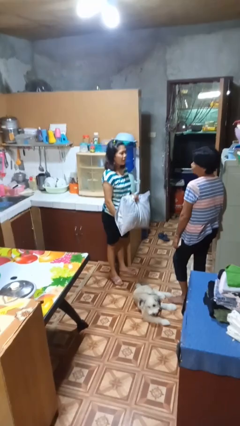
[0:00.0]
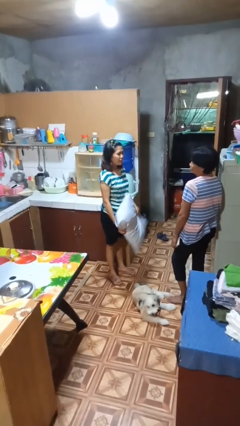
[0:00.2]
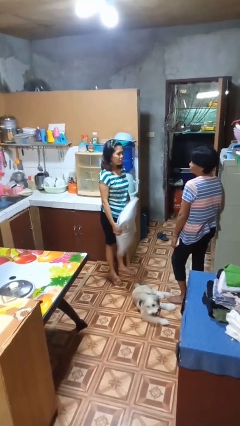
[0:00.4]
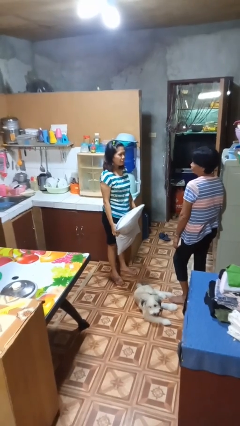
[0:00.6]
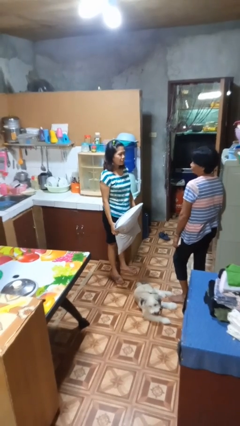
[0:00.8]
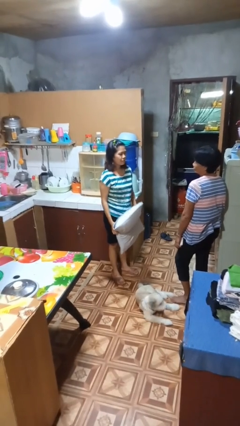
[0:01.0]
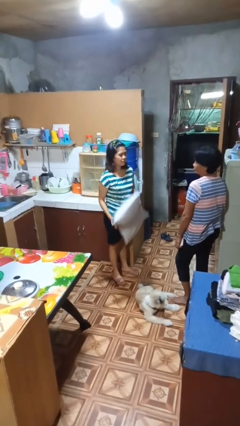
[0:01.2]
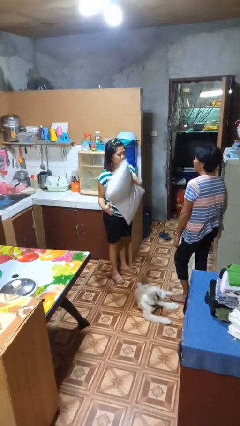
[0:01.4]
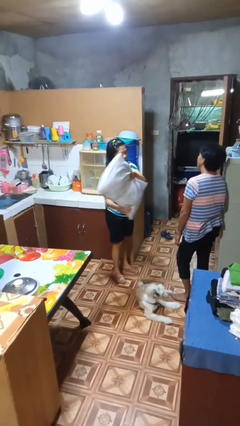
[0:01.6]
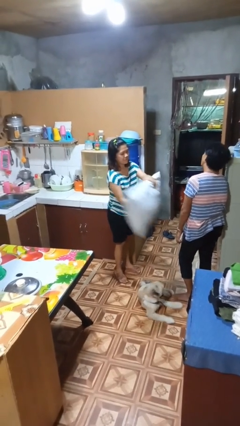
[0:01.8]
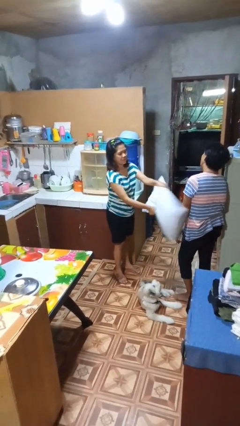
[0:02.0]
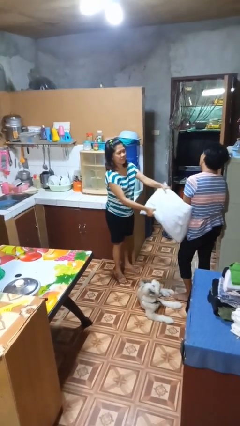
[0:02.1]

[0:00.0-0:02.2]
person hits person with pillow

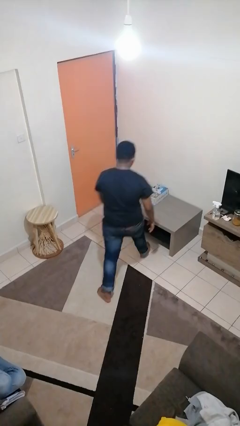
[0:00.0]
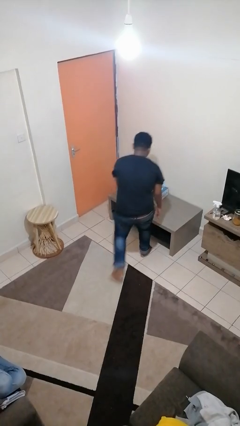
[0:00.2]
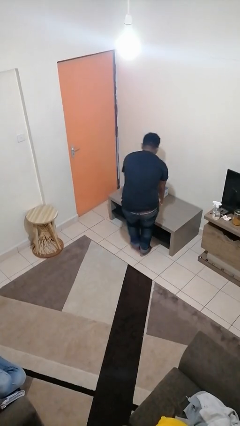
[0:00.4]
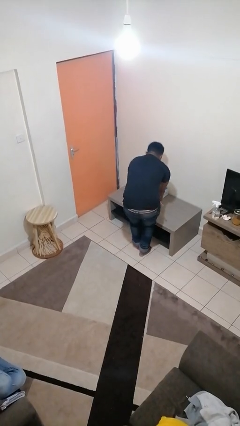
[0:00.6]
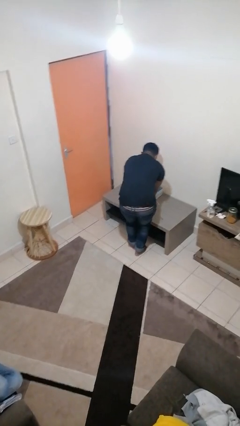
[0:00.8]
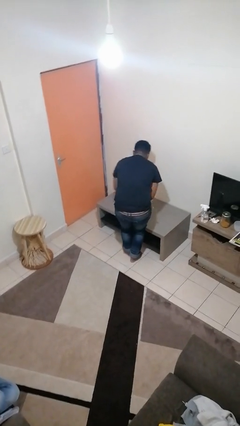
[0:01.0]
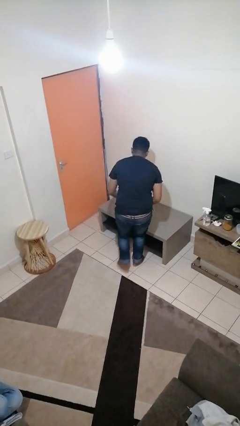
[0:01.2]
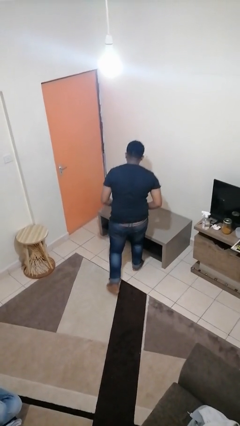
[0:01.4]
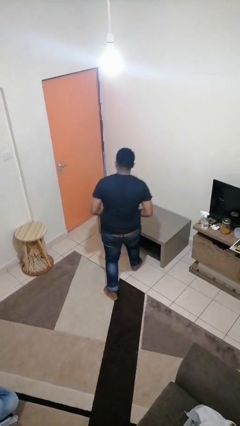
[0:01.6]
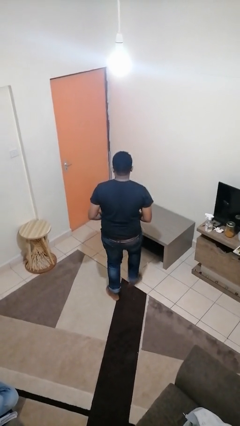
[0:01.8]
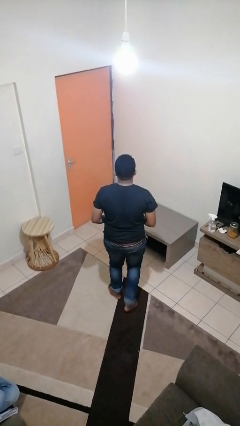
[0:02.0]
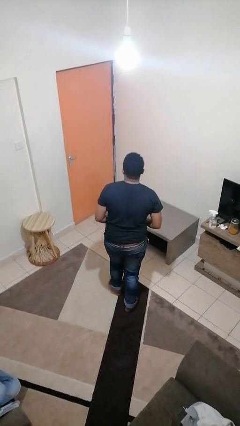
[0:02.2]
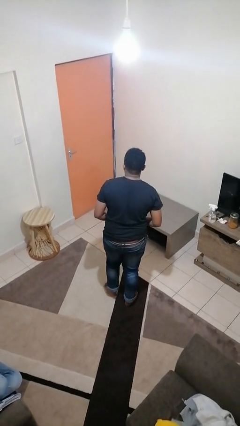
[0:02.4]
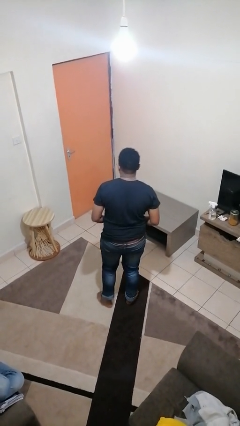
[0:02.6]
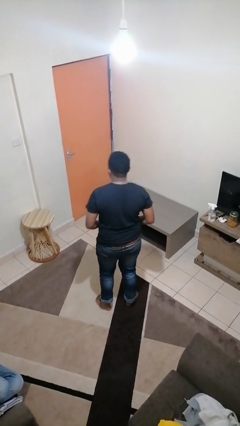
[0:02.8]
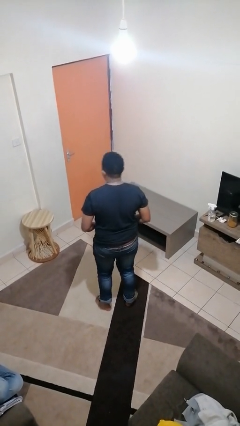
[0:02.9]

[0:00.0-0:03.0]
person picks up object from table

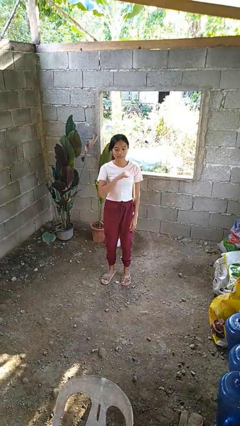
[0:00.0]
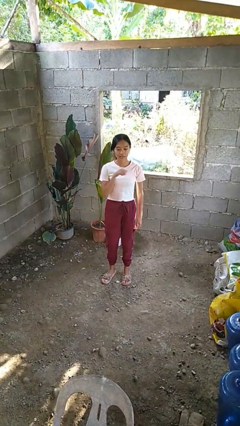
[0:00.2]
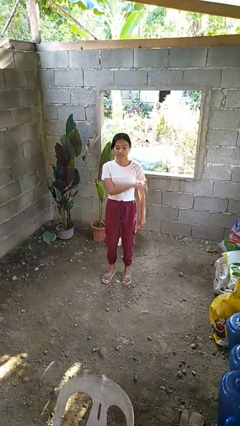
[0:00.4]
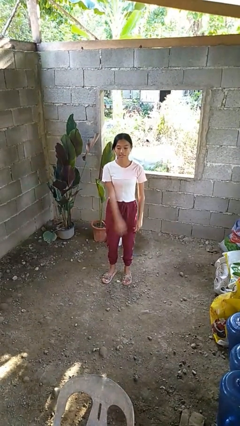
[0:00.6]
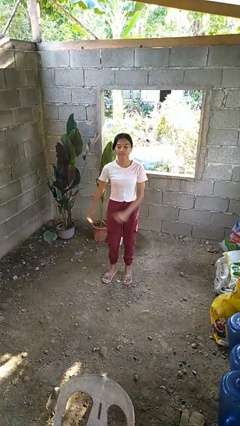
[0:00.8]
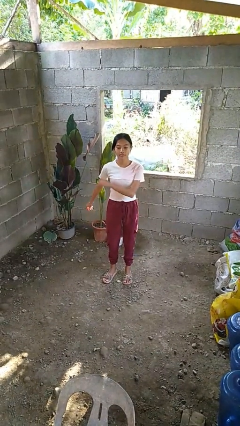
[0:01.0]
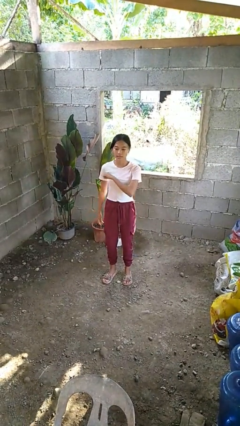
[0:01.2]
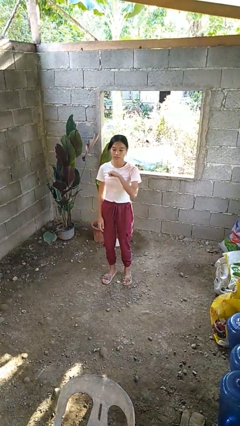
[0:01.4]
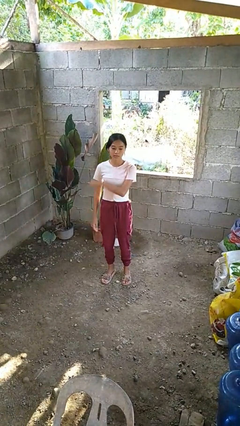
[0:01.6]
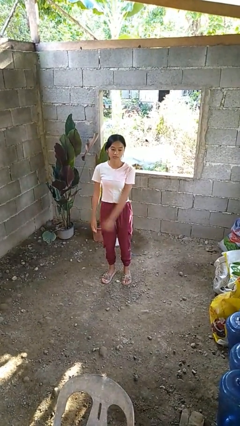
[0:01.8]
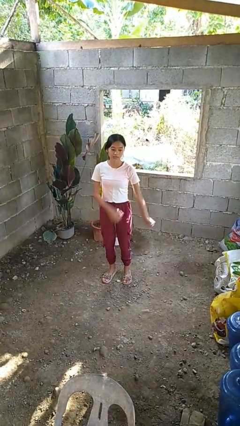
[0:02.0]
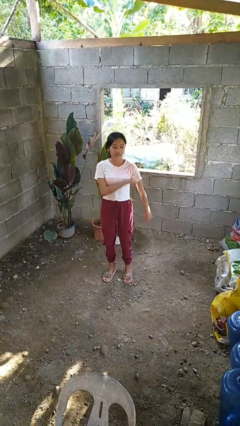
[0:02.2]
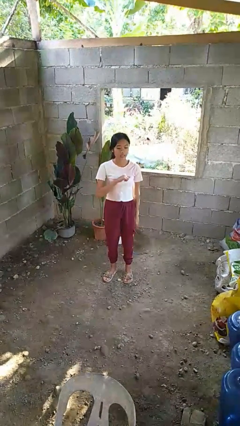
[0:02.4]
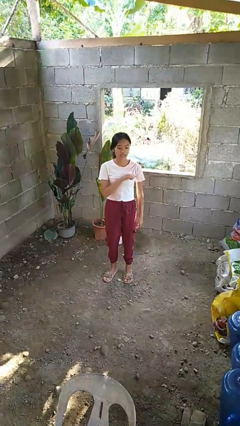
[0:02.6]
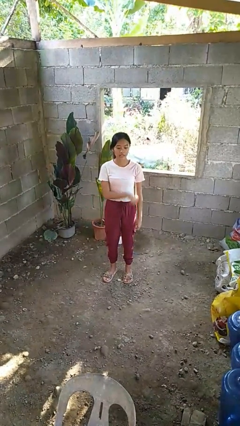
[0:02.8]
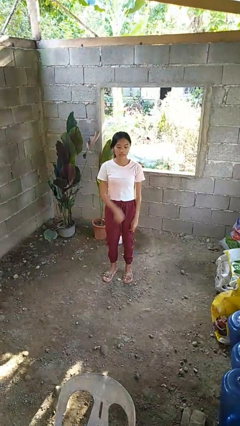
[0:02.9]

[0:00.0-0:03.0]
person dances in place

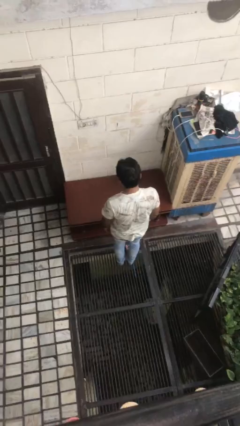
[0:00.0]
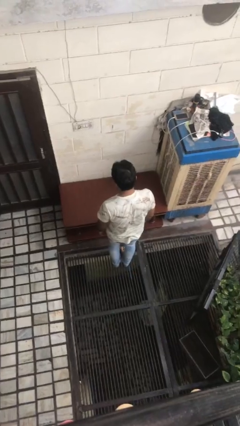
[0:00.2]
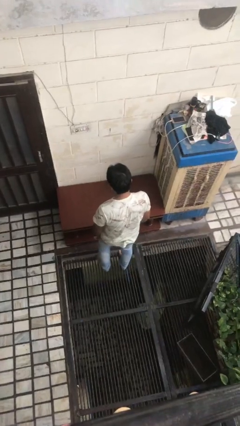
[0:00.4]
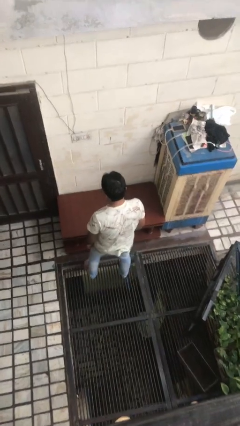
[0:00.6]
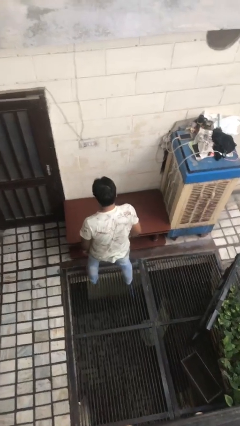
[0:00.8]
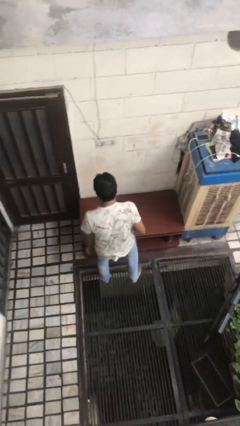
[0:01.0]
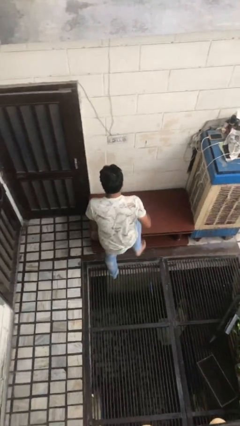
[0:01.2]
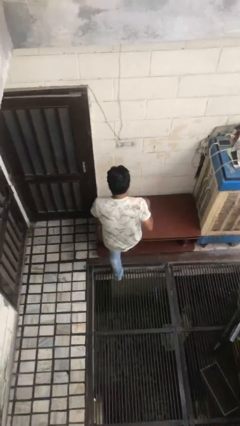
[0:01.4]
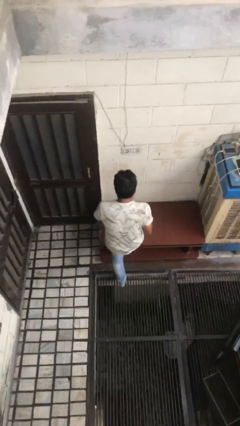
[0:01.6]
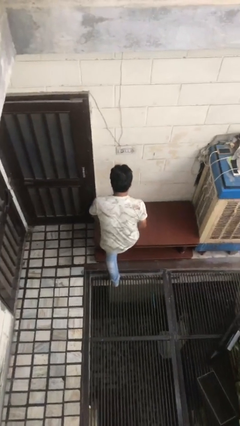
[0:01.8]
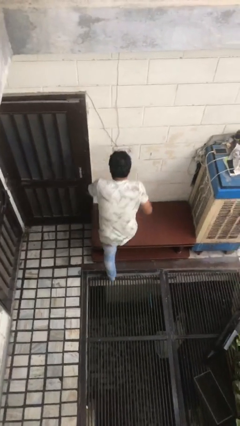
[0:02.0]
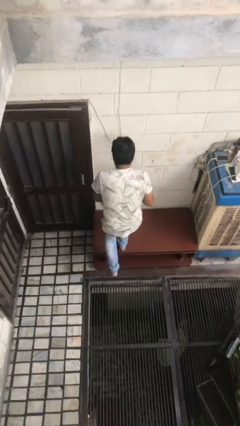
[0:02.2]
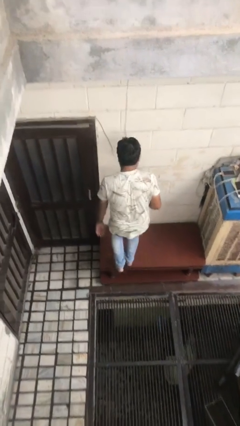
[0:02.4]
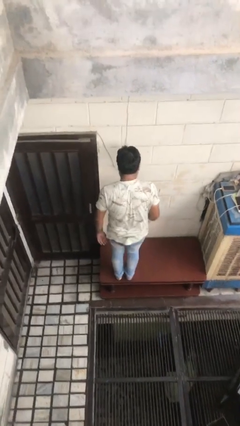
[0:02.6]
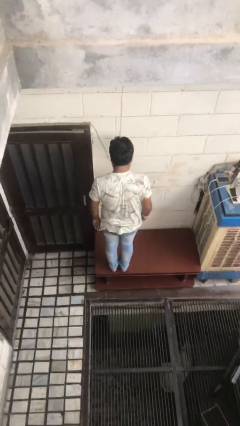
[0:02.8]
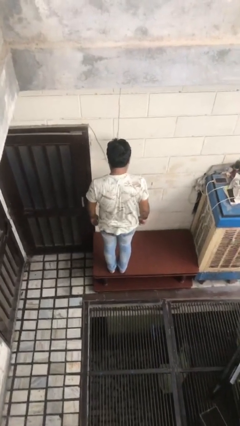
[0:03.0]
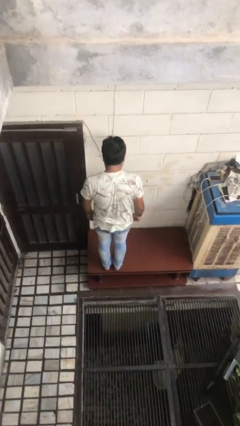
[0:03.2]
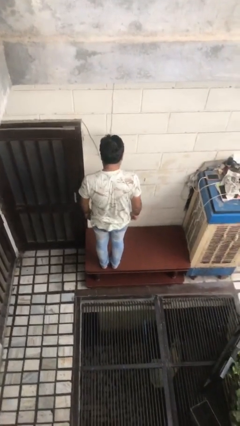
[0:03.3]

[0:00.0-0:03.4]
person climbs on table

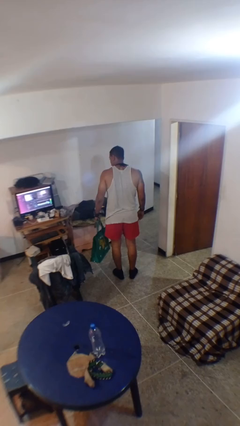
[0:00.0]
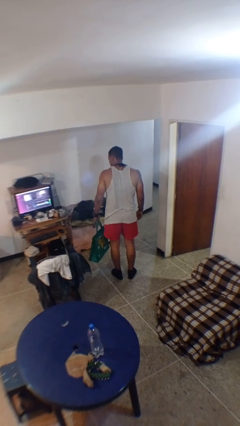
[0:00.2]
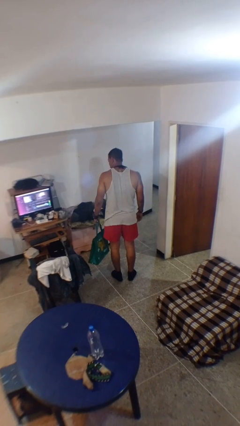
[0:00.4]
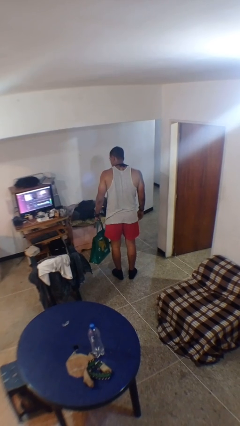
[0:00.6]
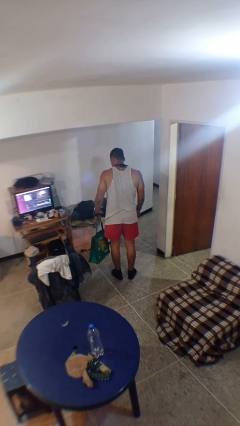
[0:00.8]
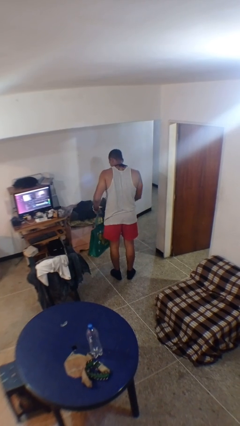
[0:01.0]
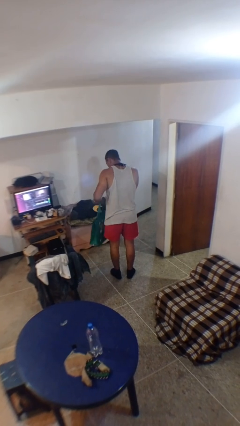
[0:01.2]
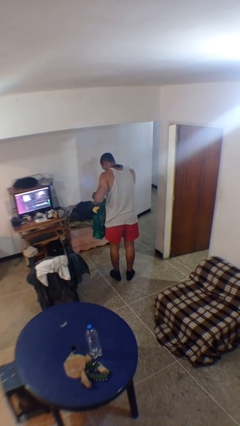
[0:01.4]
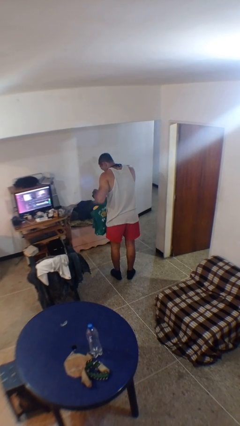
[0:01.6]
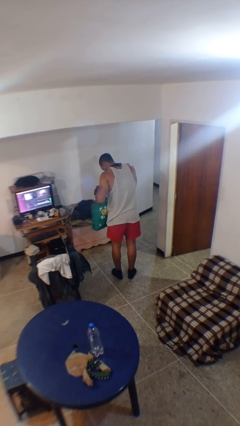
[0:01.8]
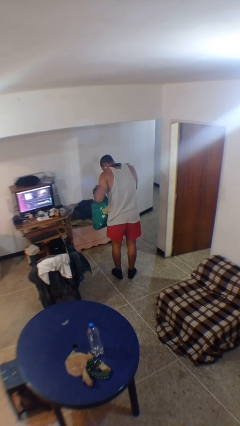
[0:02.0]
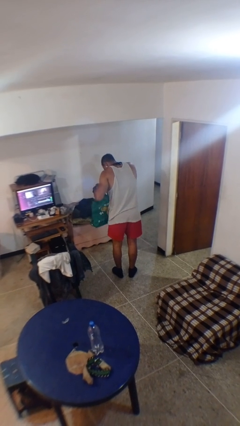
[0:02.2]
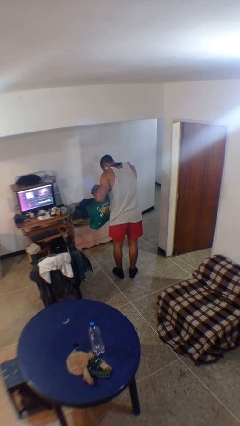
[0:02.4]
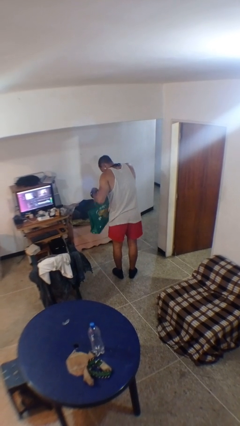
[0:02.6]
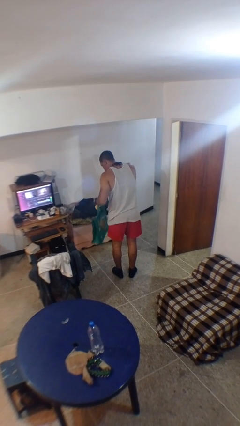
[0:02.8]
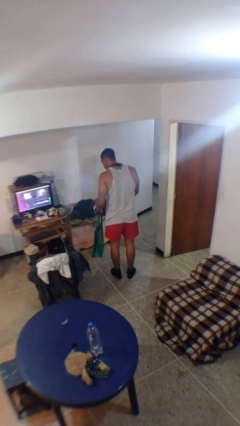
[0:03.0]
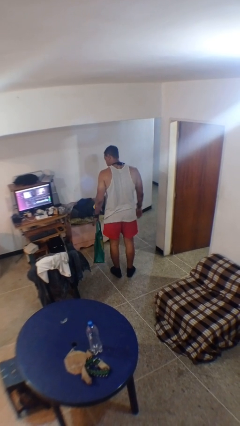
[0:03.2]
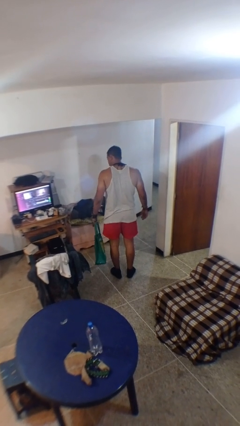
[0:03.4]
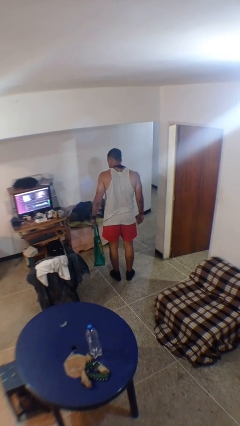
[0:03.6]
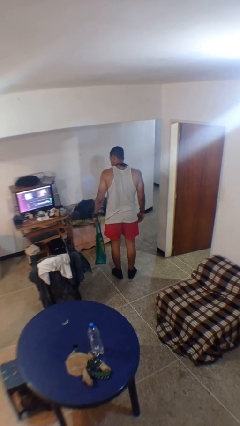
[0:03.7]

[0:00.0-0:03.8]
person searches in bag

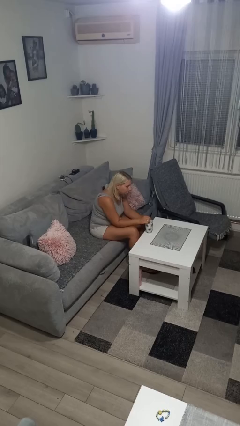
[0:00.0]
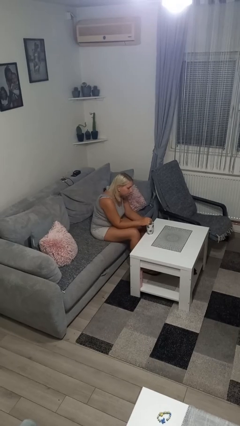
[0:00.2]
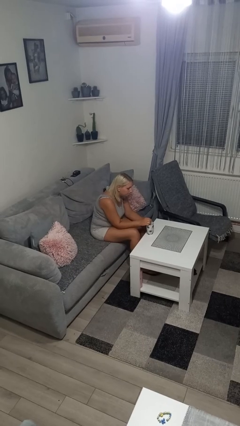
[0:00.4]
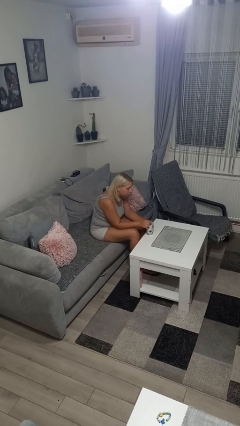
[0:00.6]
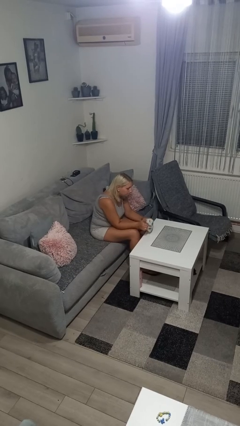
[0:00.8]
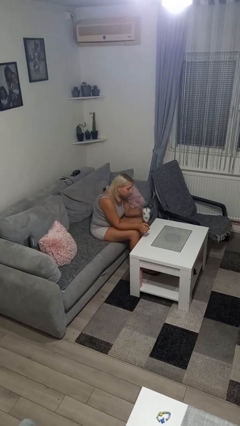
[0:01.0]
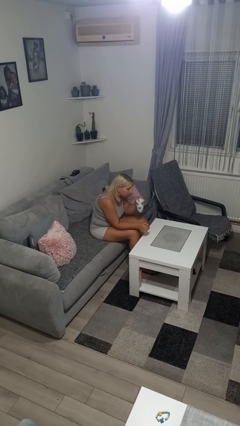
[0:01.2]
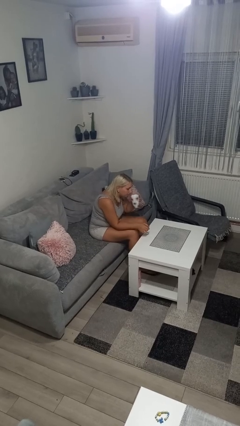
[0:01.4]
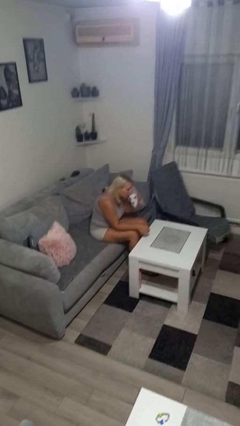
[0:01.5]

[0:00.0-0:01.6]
person stirs mug

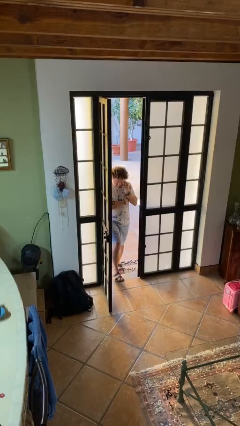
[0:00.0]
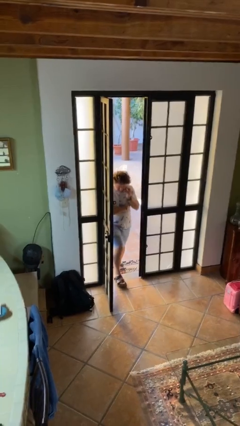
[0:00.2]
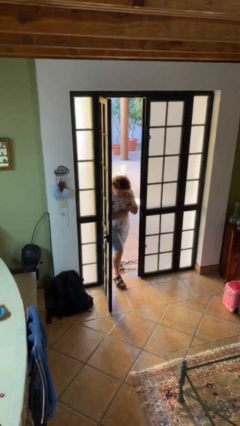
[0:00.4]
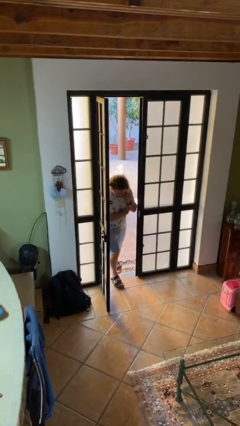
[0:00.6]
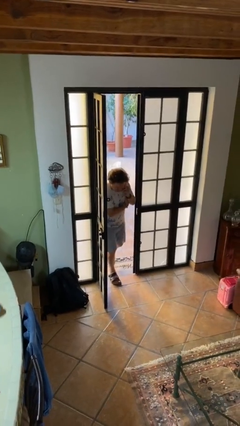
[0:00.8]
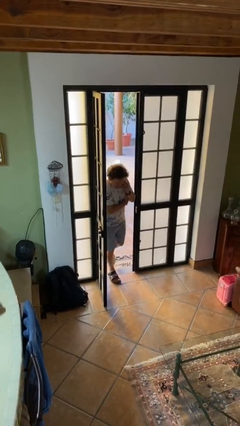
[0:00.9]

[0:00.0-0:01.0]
person enters scene through structure
